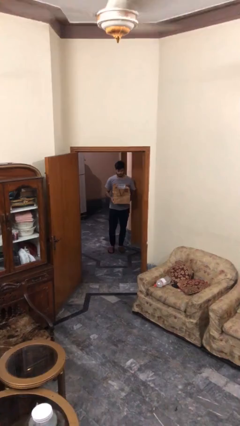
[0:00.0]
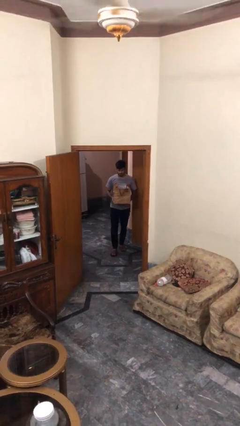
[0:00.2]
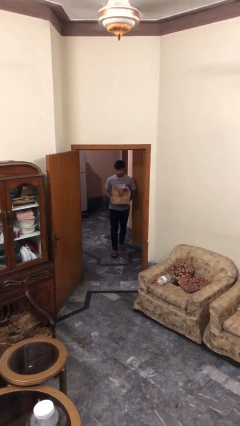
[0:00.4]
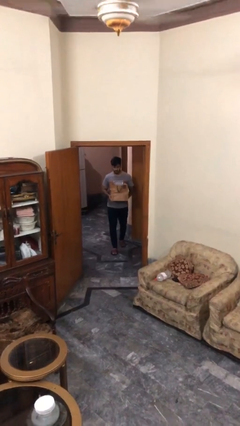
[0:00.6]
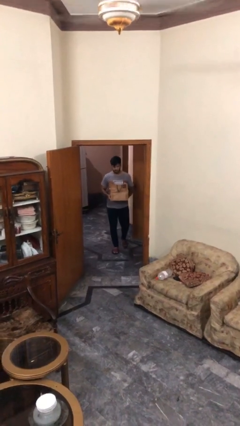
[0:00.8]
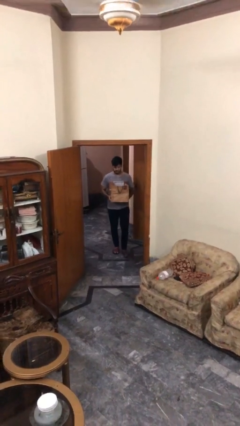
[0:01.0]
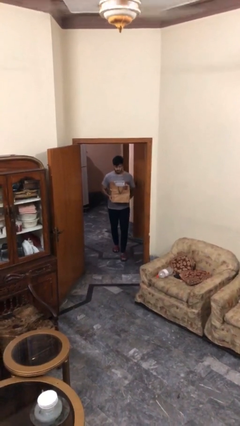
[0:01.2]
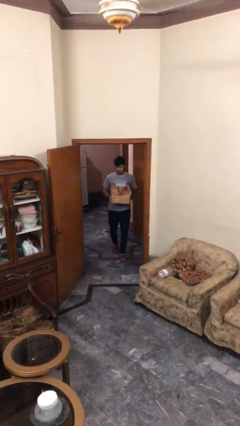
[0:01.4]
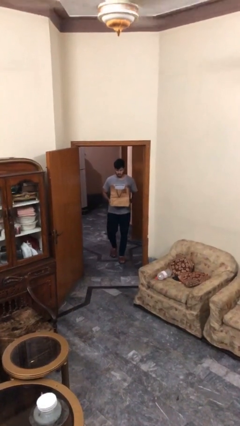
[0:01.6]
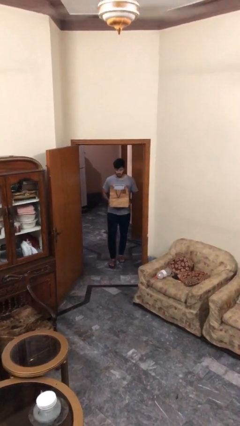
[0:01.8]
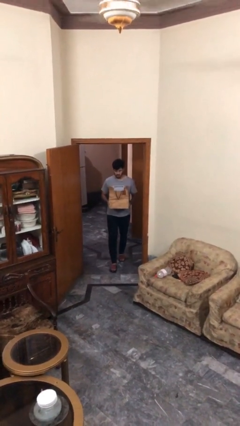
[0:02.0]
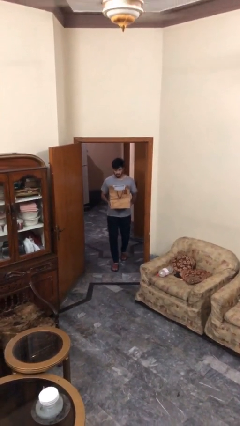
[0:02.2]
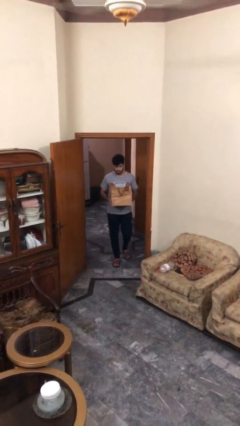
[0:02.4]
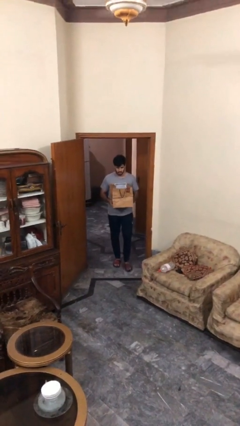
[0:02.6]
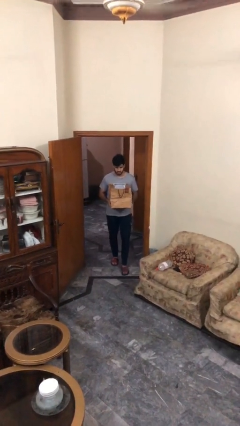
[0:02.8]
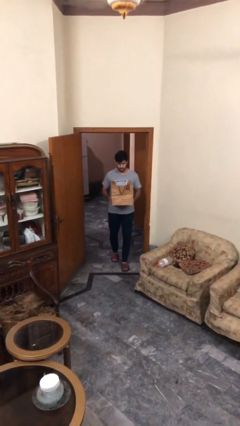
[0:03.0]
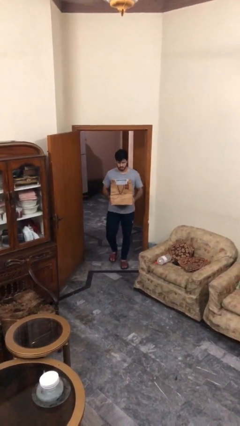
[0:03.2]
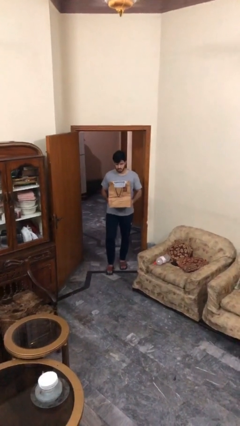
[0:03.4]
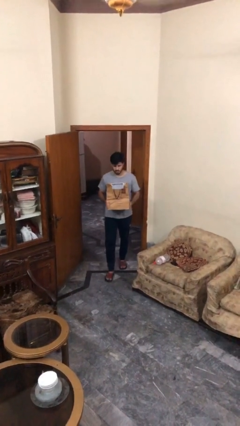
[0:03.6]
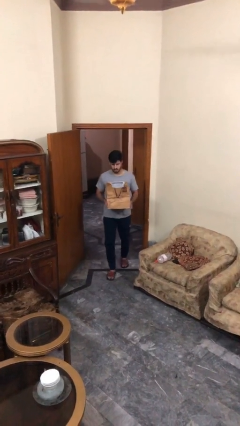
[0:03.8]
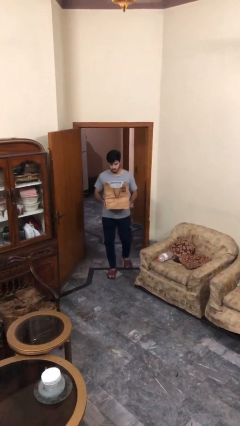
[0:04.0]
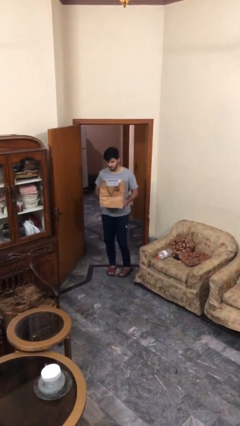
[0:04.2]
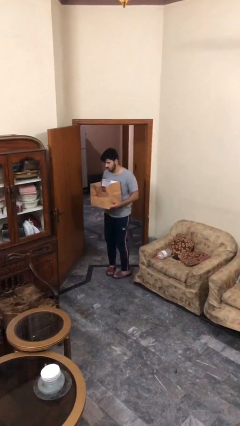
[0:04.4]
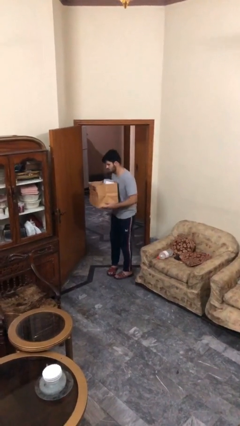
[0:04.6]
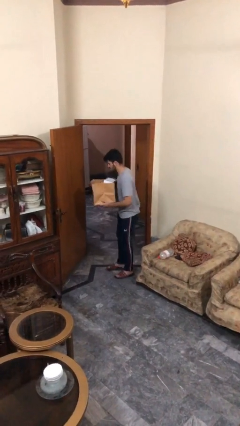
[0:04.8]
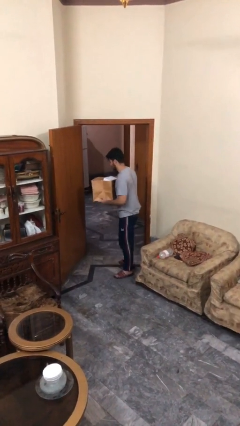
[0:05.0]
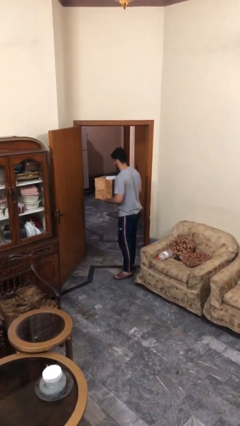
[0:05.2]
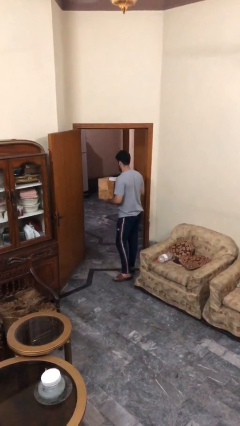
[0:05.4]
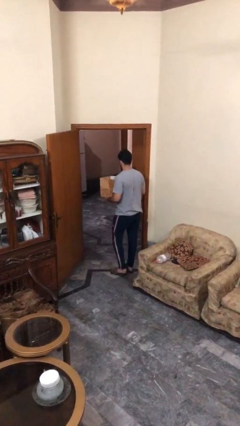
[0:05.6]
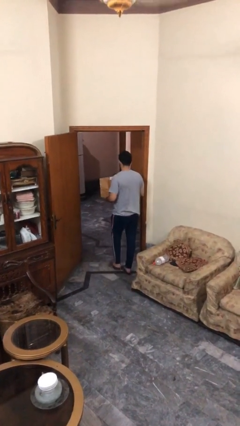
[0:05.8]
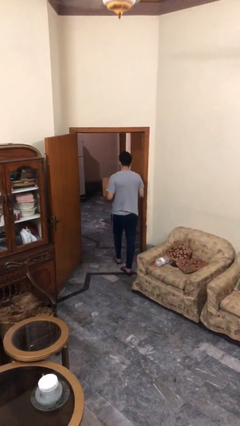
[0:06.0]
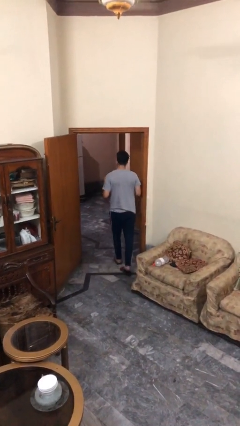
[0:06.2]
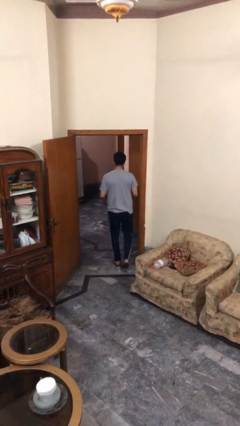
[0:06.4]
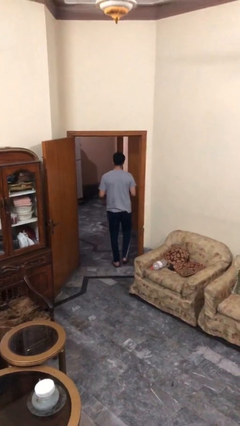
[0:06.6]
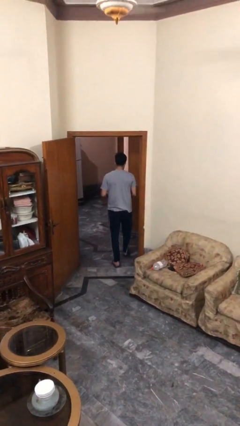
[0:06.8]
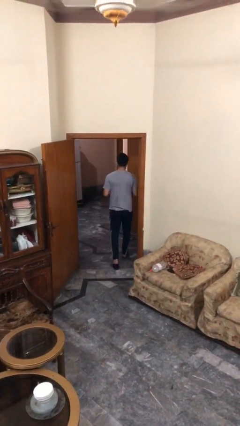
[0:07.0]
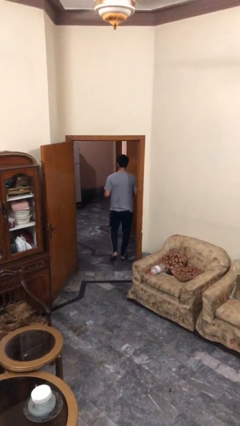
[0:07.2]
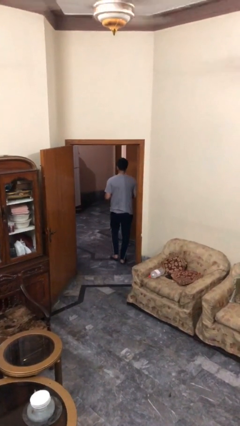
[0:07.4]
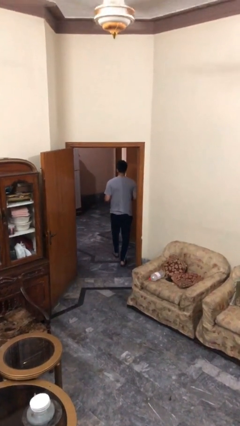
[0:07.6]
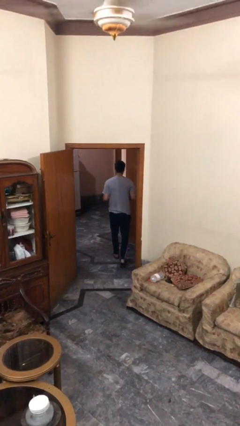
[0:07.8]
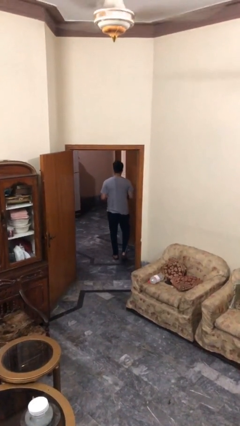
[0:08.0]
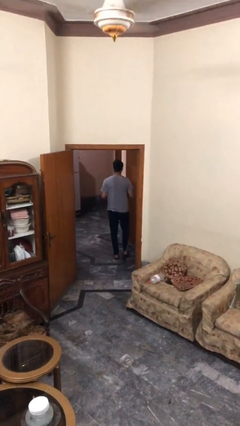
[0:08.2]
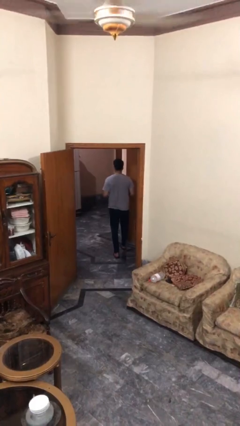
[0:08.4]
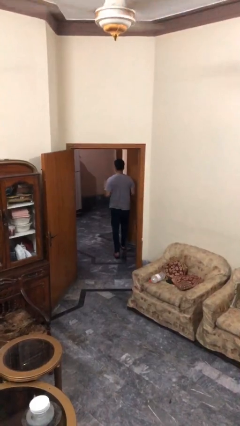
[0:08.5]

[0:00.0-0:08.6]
person carries groceries

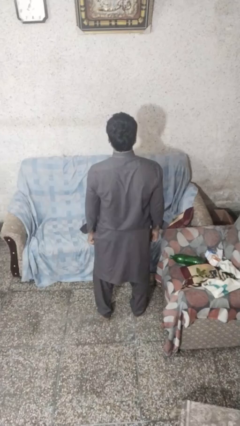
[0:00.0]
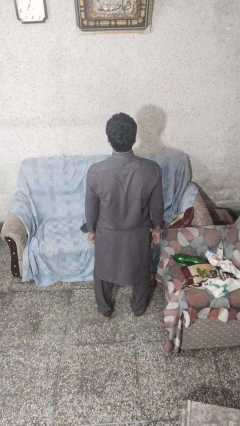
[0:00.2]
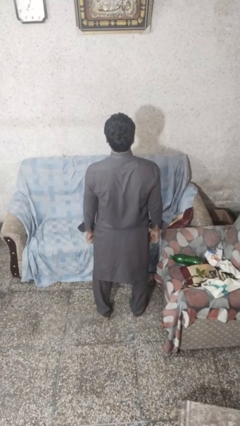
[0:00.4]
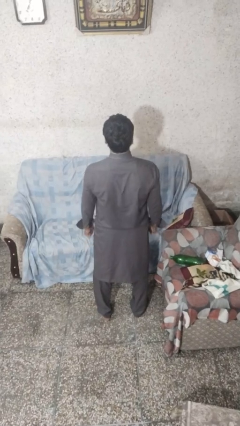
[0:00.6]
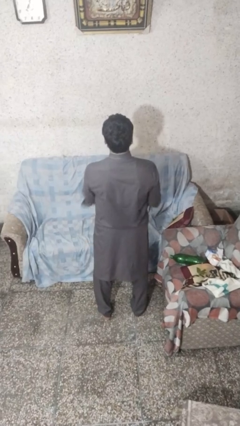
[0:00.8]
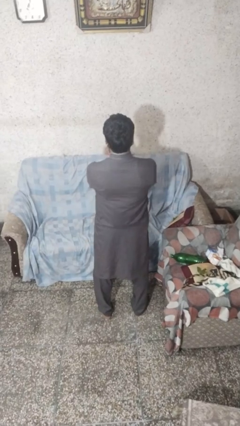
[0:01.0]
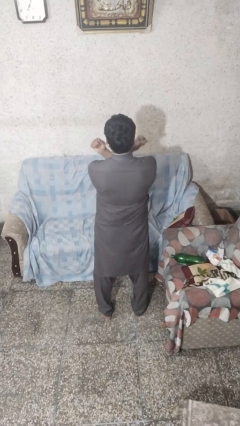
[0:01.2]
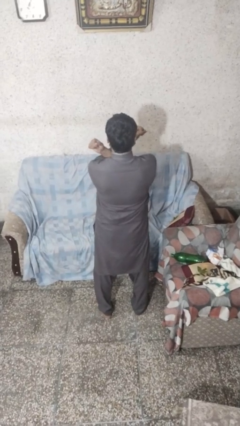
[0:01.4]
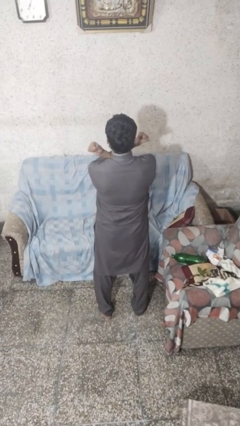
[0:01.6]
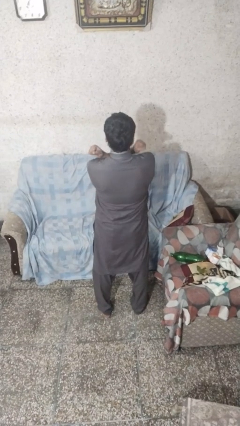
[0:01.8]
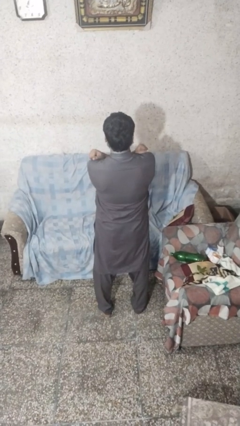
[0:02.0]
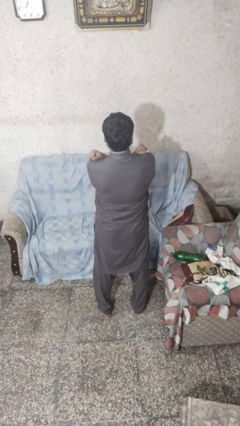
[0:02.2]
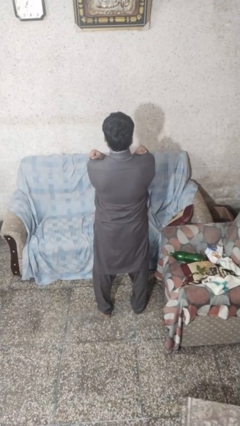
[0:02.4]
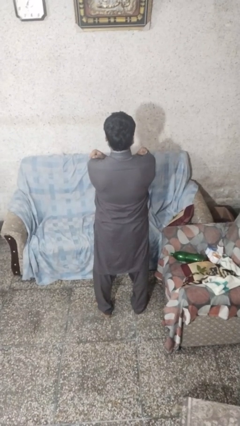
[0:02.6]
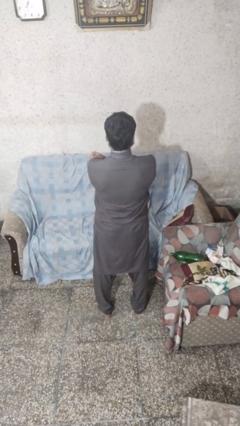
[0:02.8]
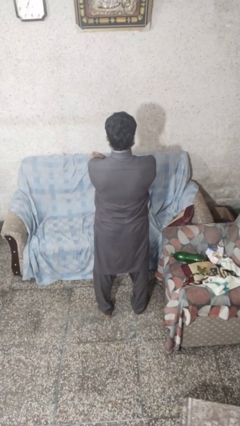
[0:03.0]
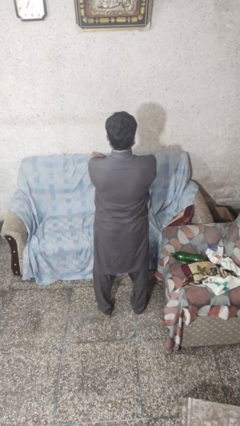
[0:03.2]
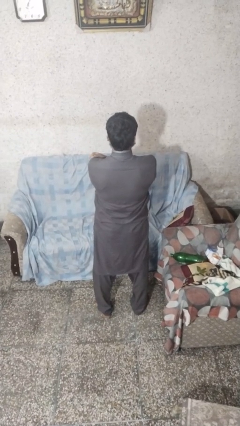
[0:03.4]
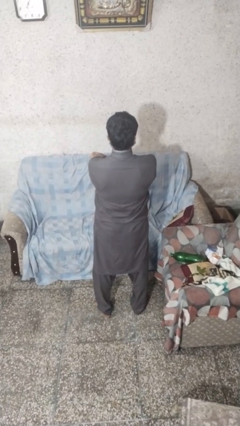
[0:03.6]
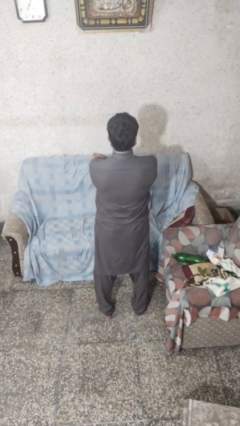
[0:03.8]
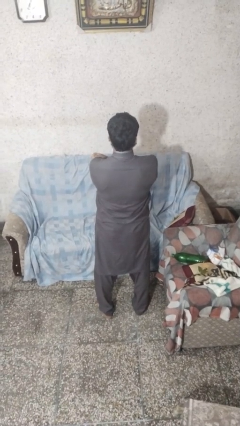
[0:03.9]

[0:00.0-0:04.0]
person gestures arms x

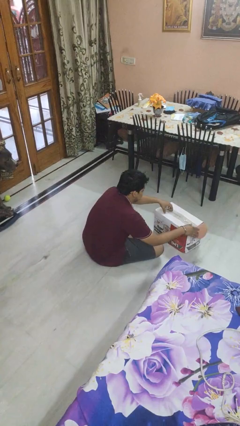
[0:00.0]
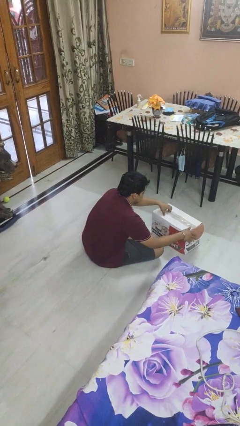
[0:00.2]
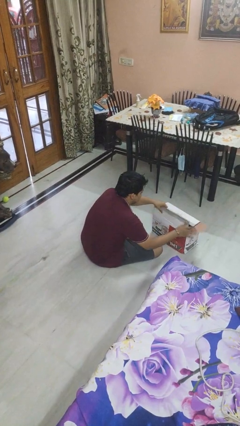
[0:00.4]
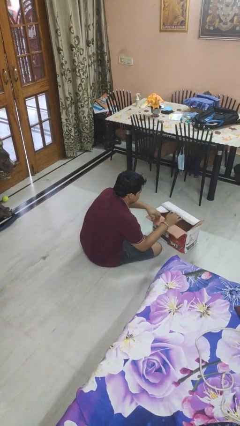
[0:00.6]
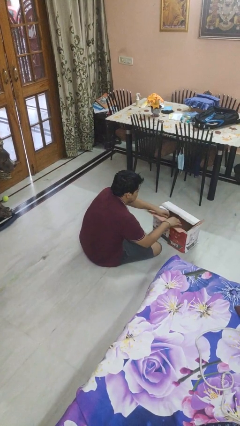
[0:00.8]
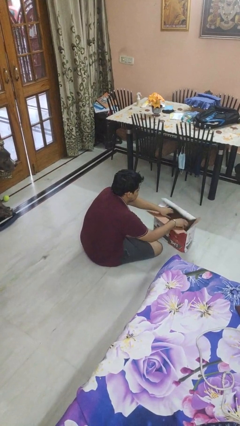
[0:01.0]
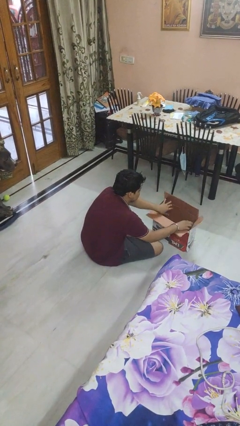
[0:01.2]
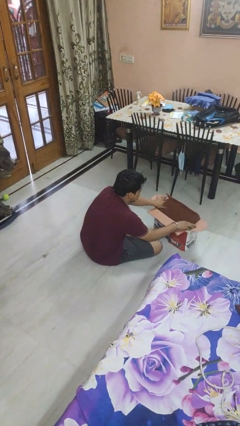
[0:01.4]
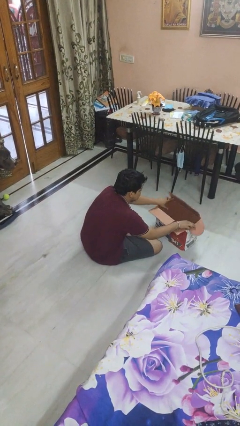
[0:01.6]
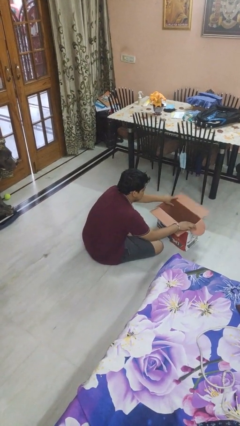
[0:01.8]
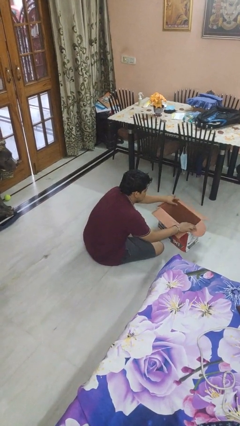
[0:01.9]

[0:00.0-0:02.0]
person opens box

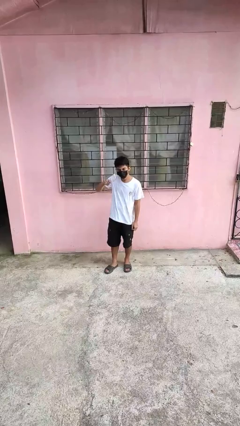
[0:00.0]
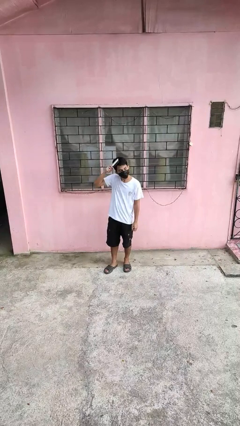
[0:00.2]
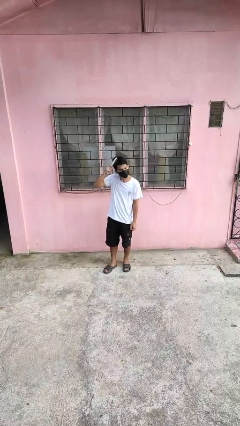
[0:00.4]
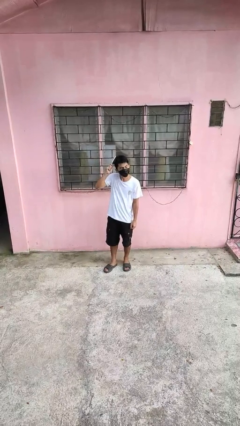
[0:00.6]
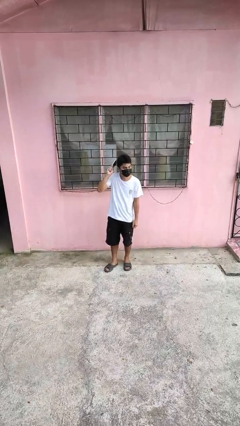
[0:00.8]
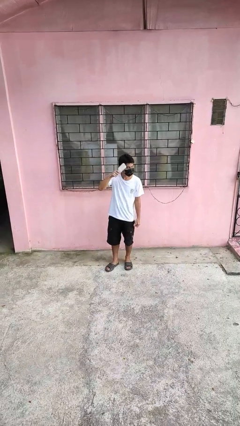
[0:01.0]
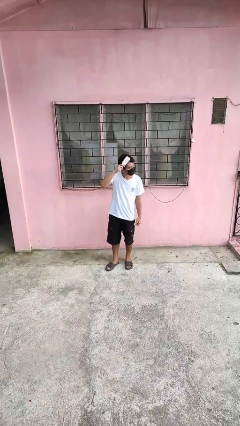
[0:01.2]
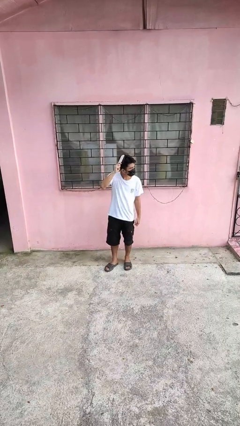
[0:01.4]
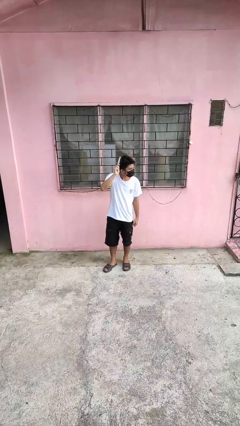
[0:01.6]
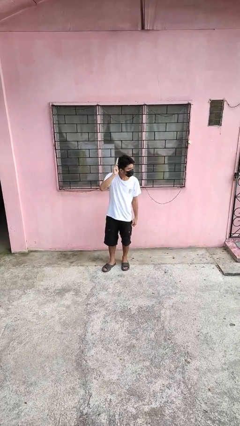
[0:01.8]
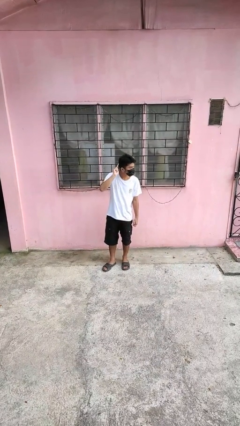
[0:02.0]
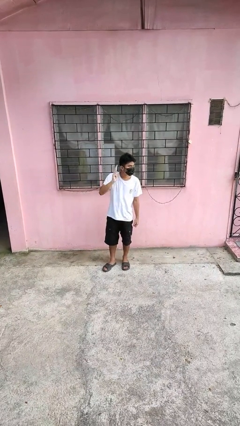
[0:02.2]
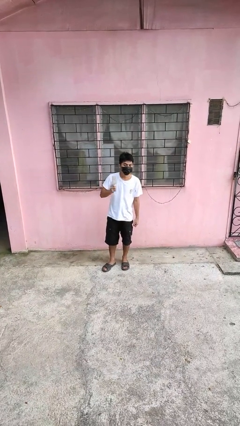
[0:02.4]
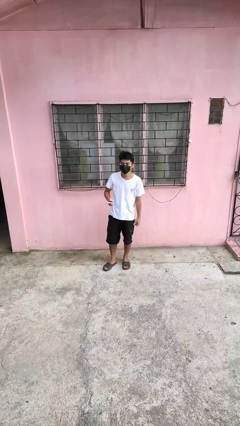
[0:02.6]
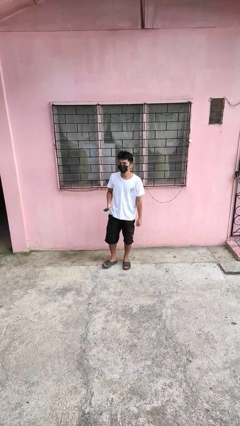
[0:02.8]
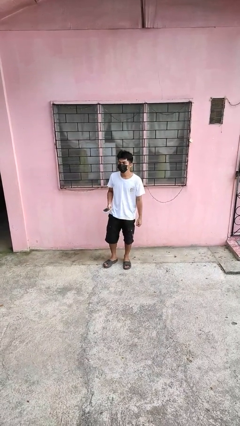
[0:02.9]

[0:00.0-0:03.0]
person brushes hair
